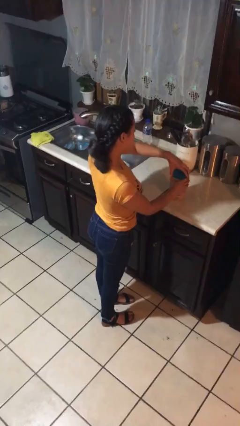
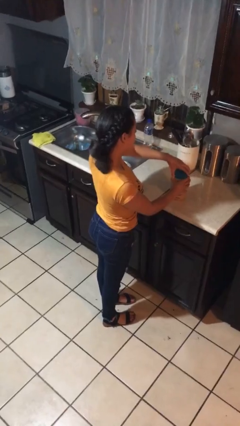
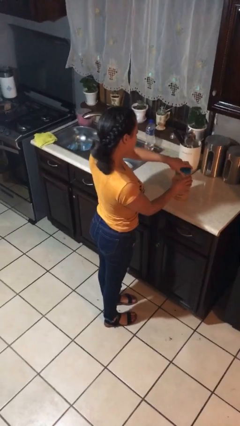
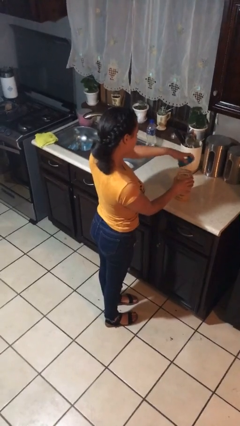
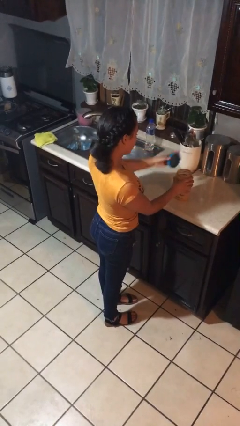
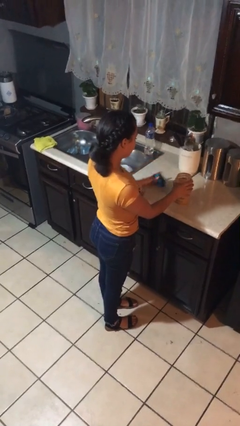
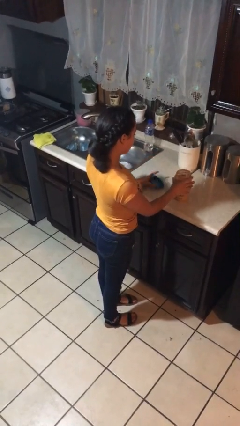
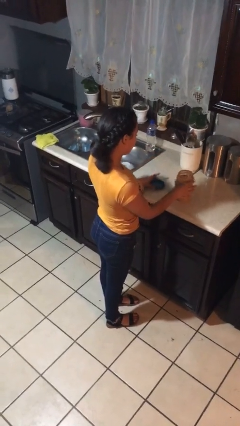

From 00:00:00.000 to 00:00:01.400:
person opens jar

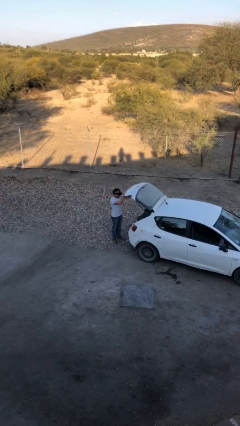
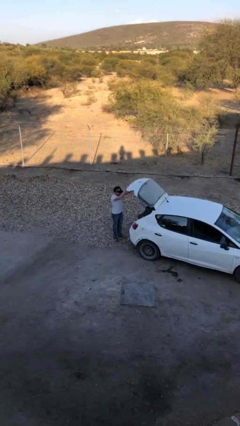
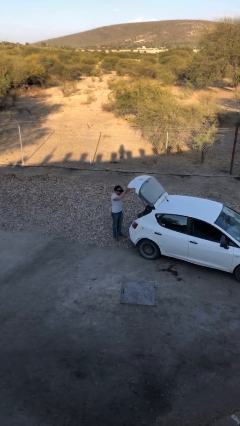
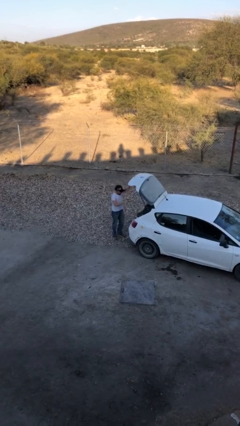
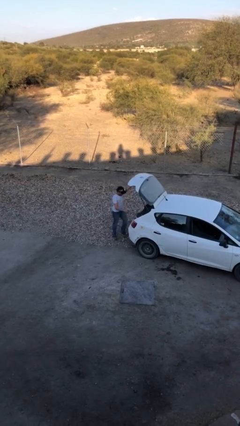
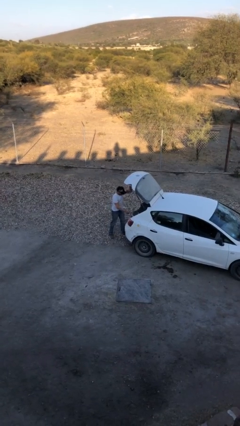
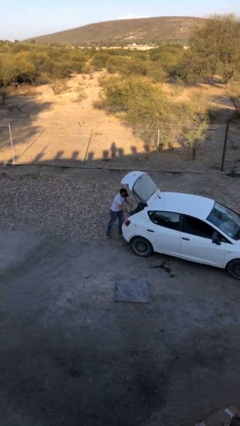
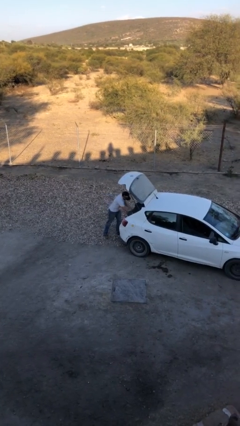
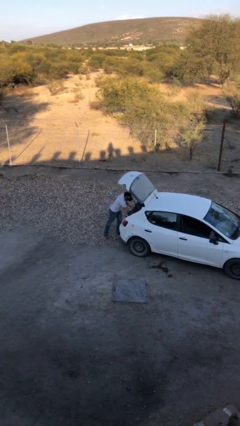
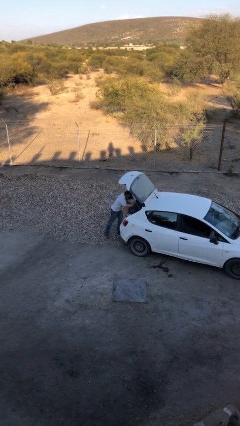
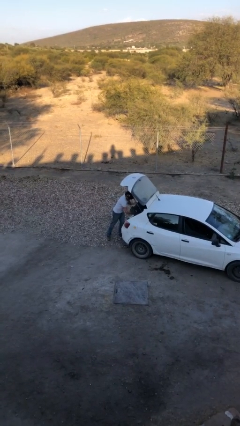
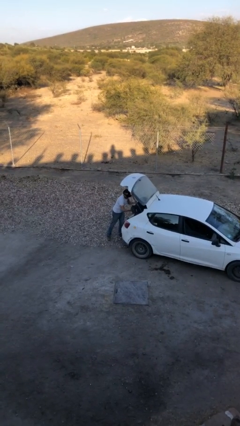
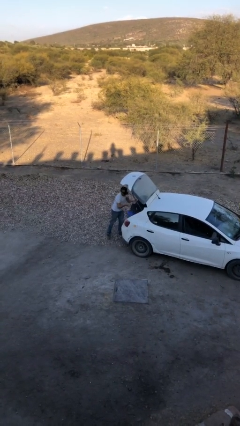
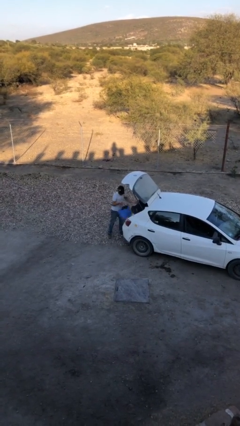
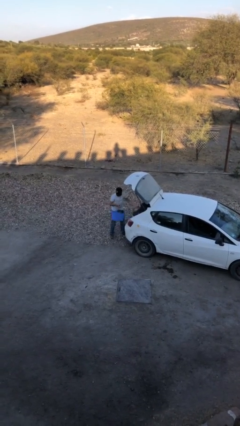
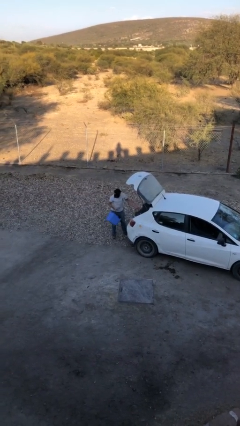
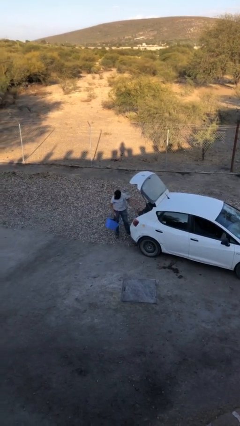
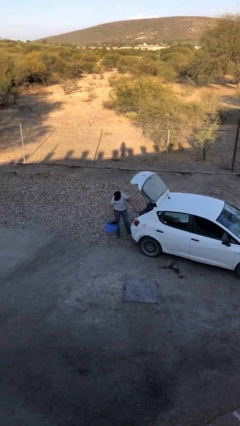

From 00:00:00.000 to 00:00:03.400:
person unloads car

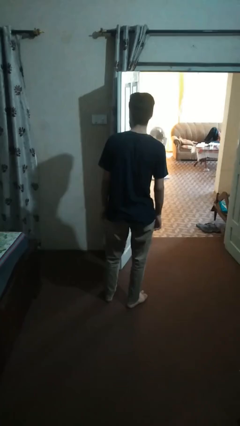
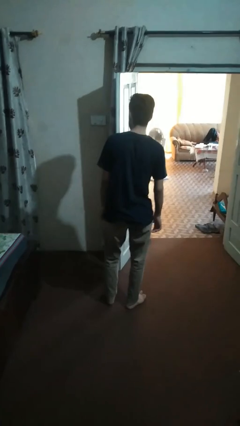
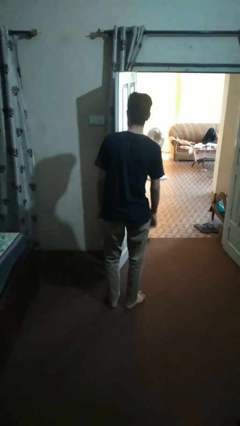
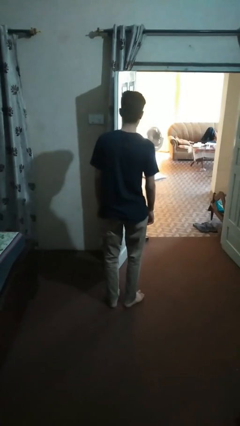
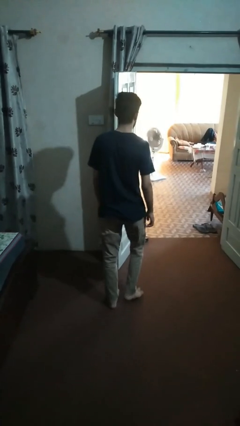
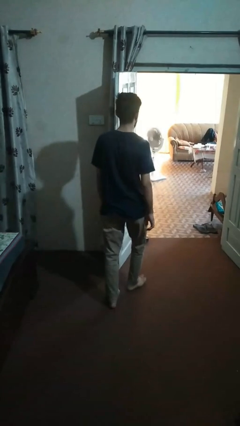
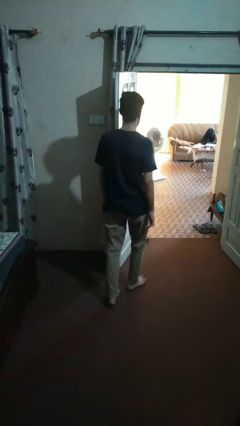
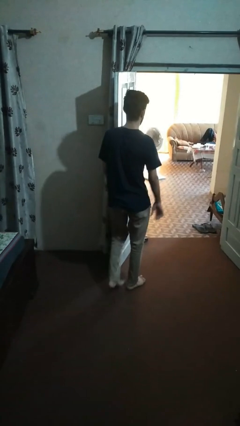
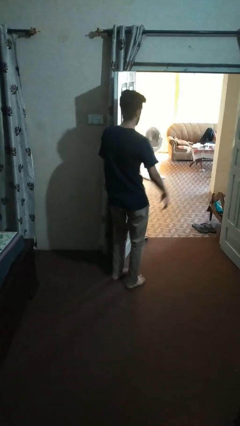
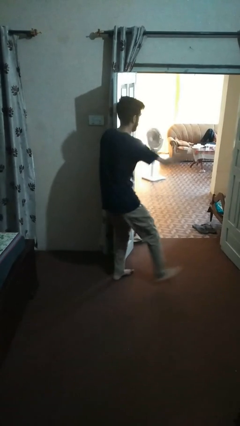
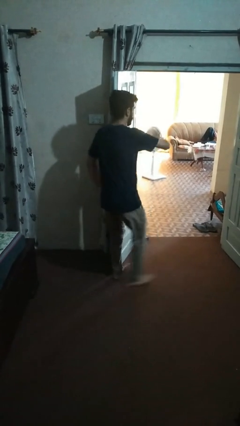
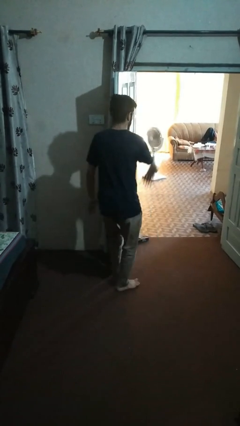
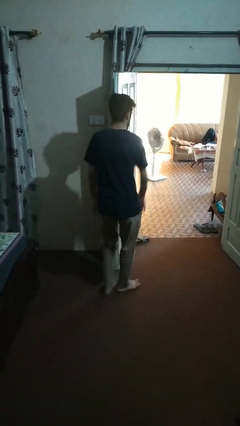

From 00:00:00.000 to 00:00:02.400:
person bumps into wall

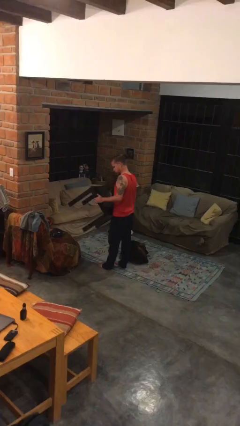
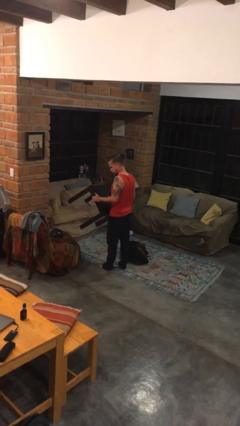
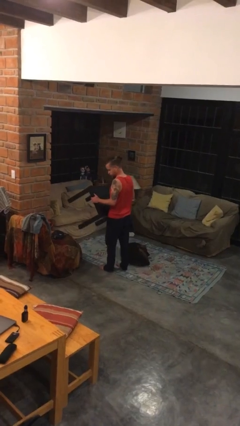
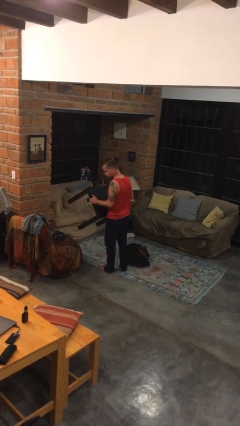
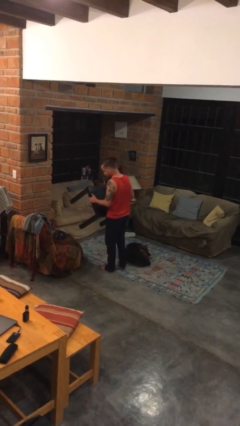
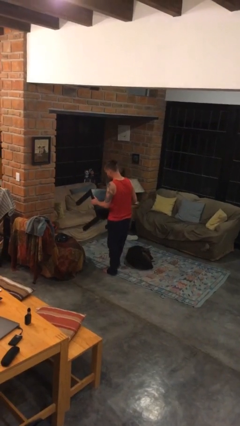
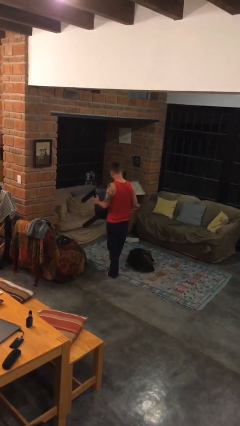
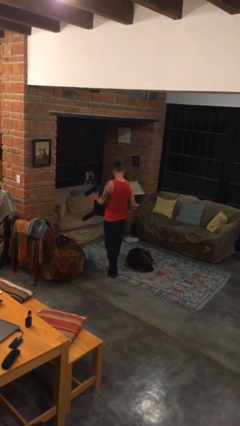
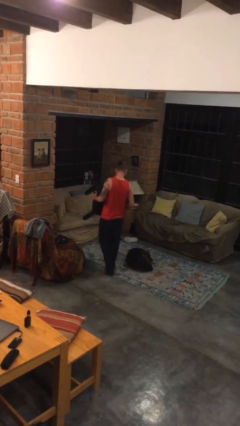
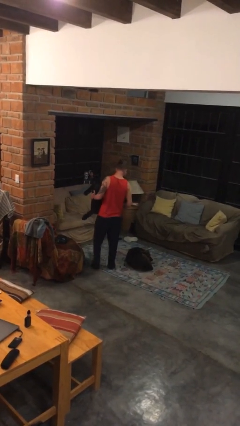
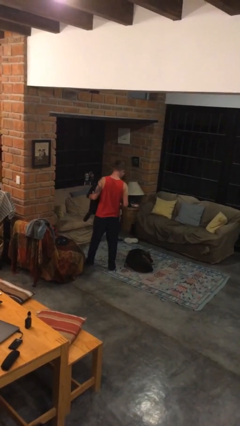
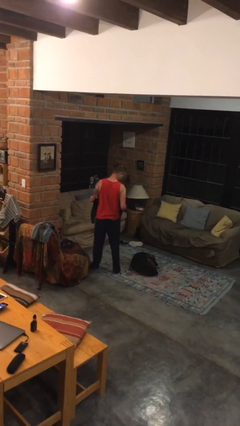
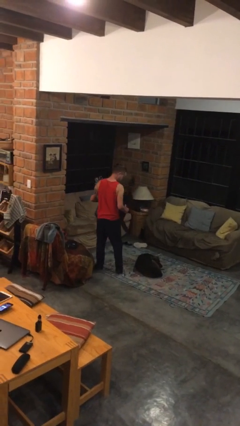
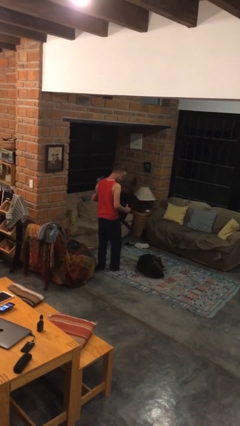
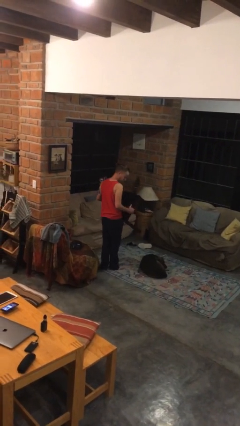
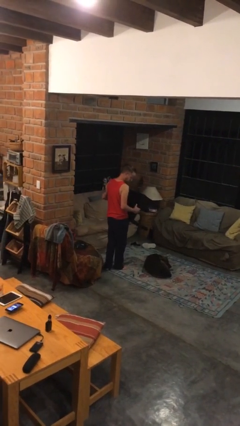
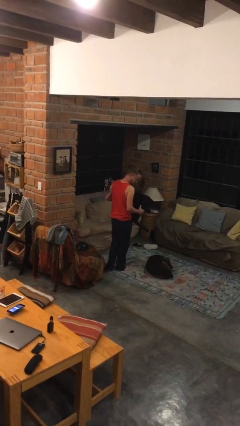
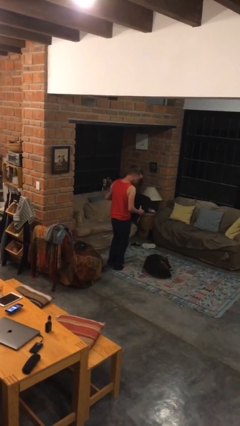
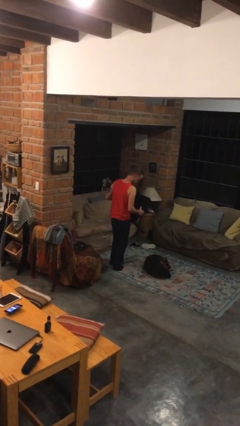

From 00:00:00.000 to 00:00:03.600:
person carries furniture

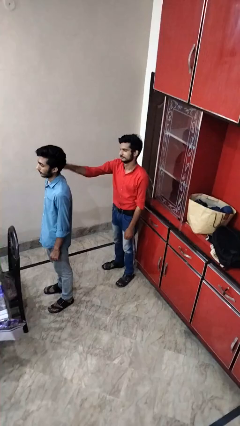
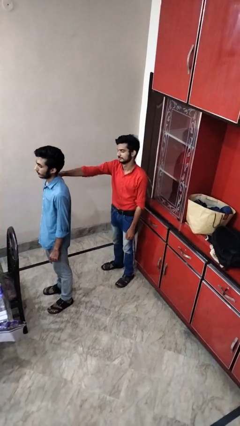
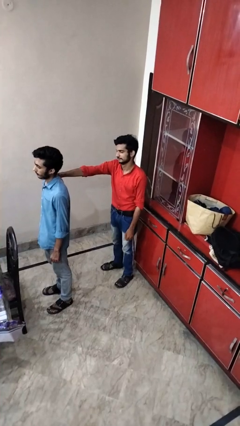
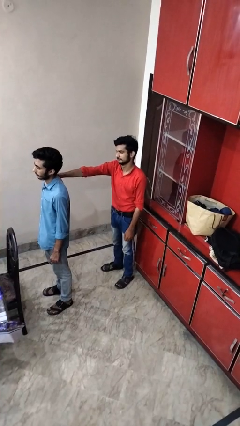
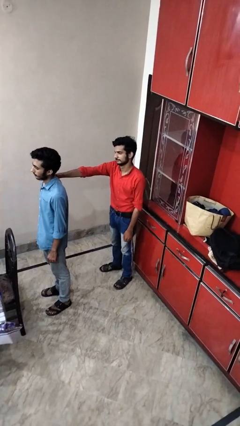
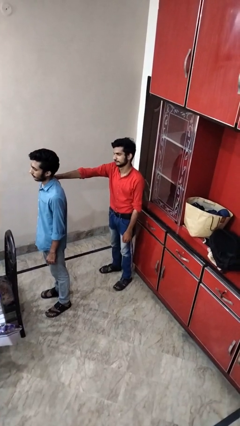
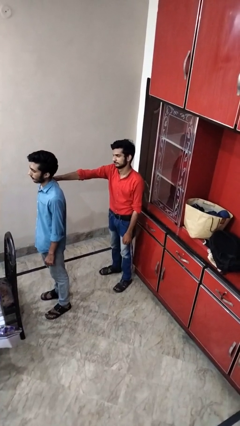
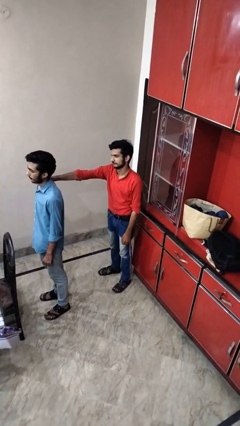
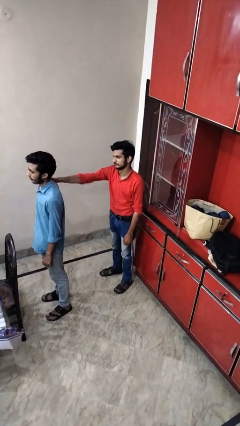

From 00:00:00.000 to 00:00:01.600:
person grabs person by shoulder

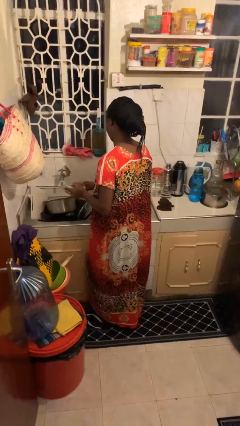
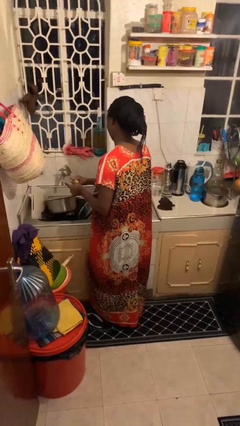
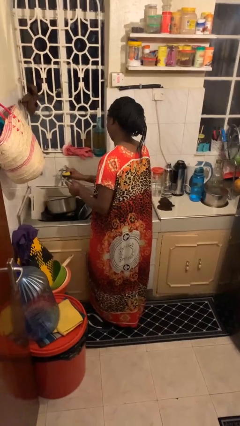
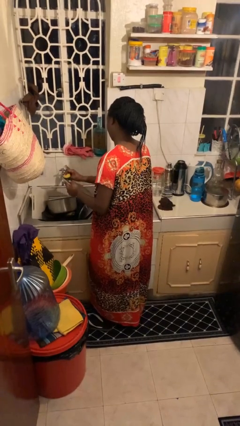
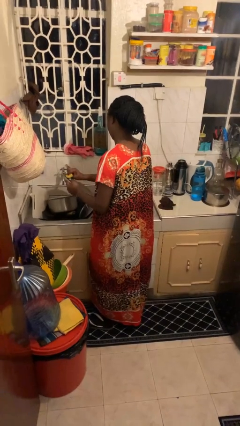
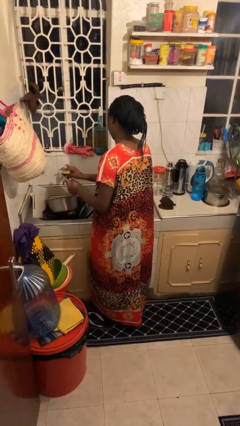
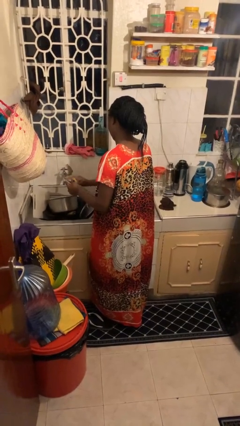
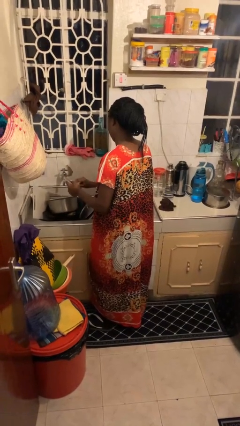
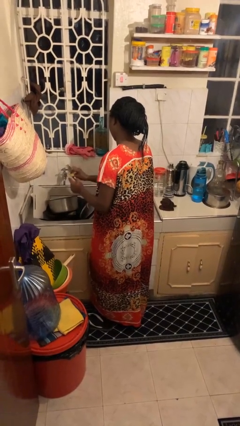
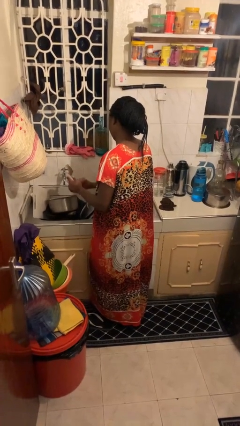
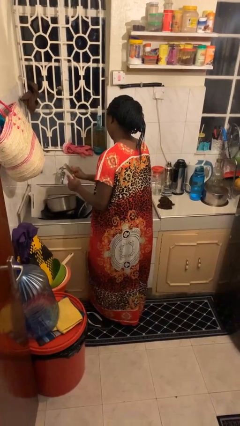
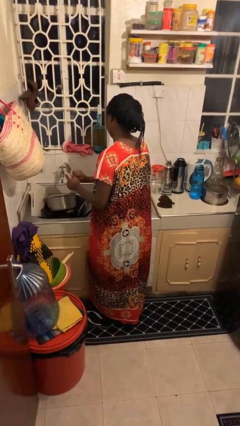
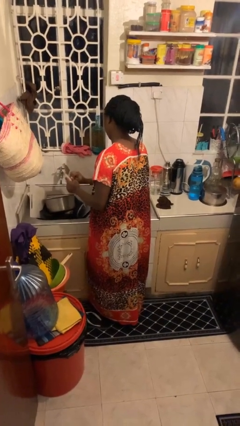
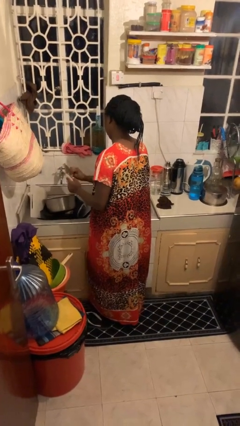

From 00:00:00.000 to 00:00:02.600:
person washes dish

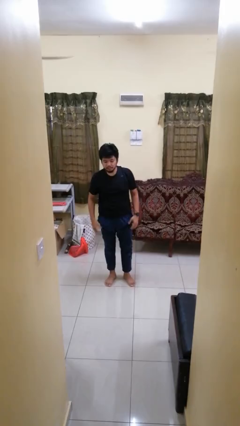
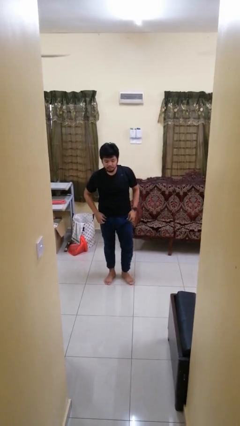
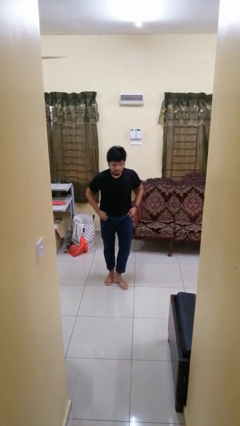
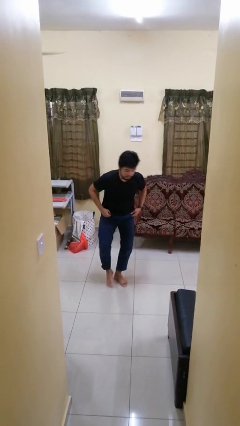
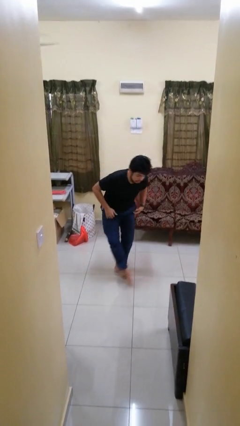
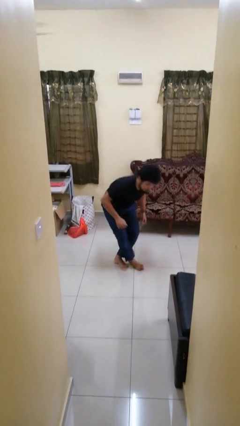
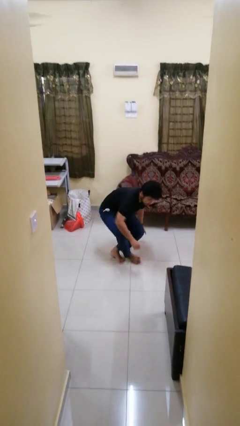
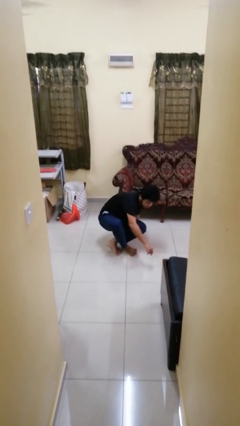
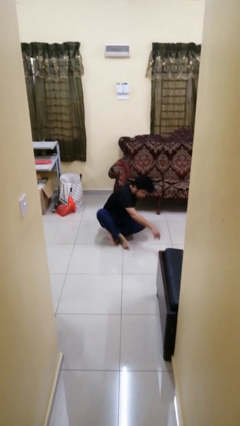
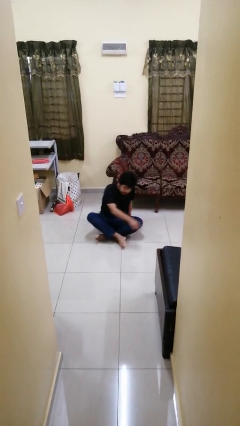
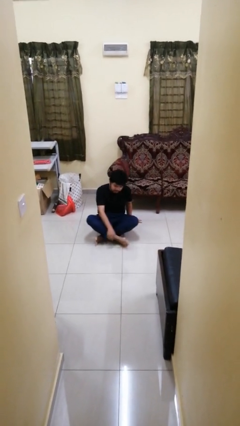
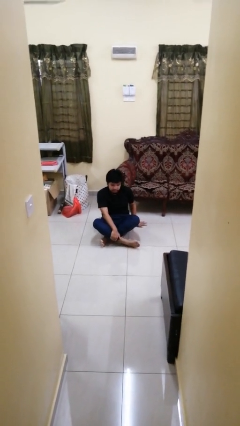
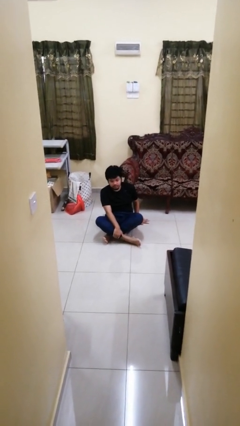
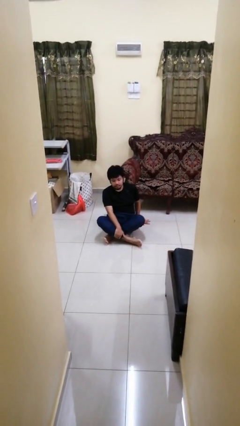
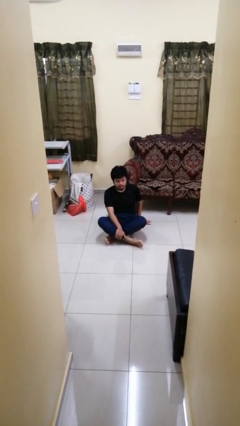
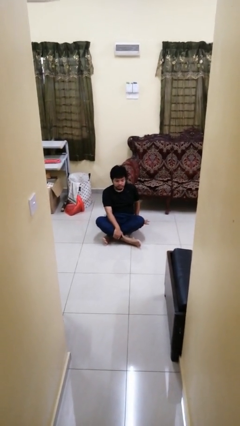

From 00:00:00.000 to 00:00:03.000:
person sits crisscross
